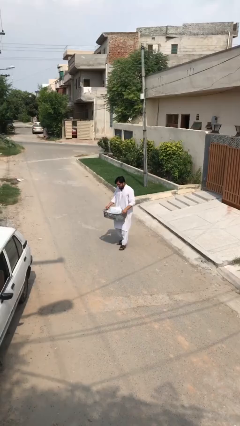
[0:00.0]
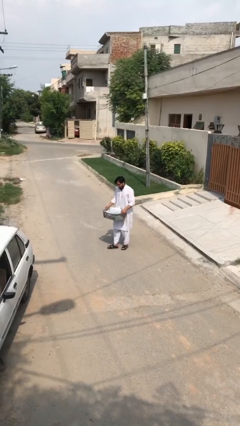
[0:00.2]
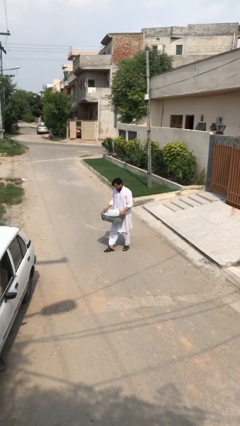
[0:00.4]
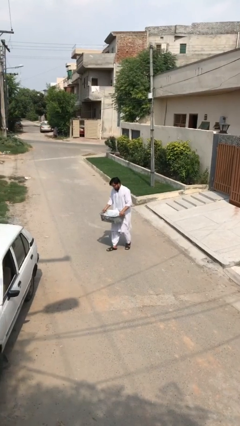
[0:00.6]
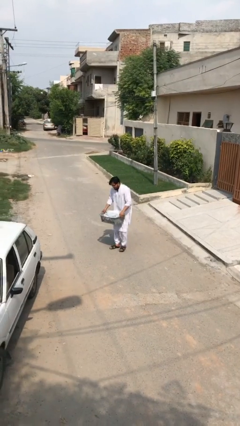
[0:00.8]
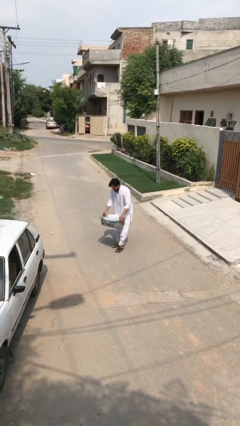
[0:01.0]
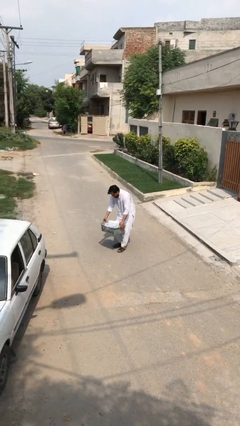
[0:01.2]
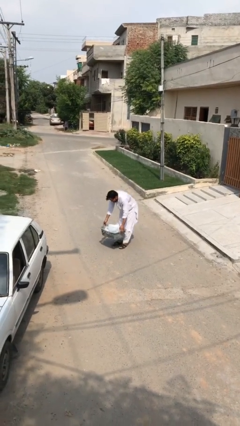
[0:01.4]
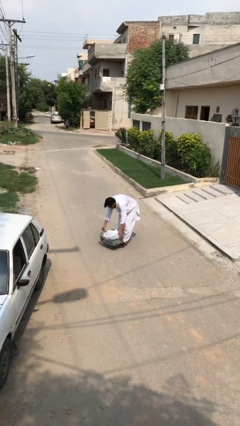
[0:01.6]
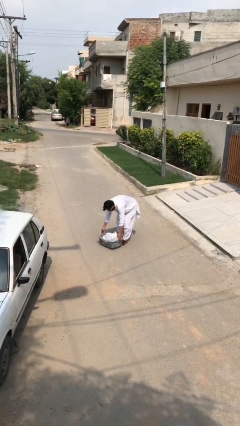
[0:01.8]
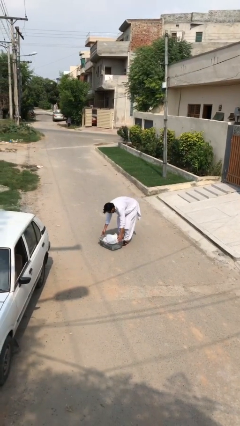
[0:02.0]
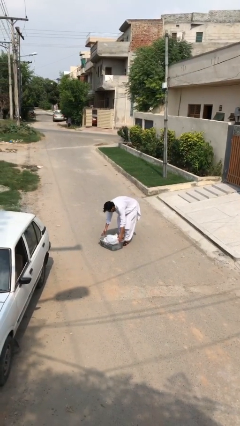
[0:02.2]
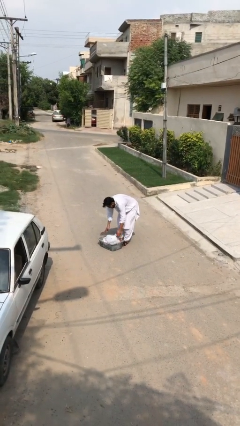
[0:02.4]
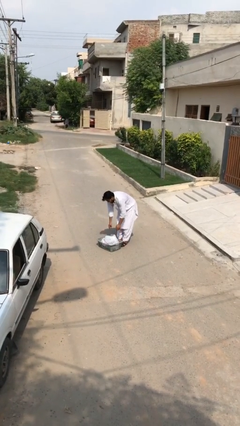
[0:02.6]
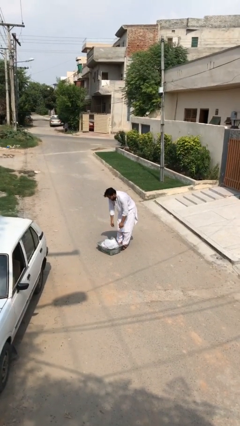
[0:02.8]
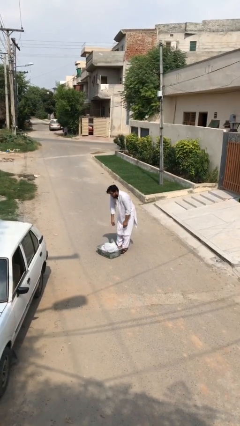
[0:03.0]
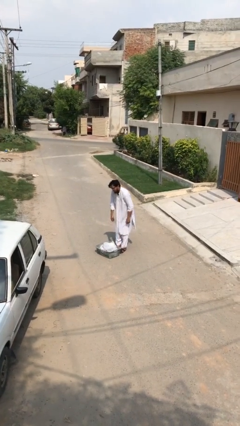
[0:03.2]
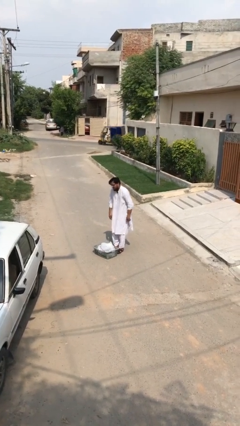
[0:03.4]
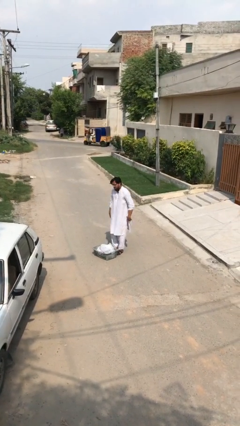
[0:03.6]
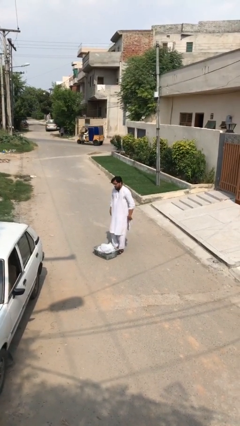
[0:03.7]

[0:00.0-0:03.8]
person puts down object on floor

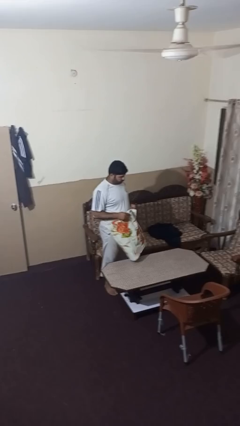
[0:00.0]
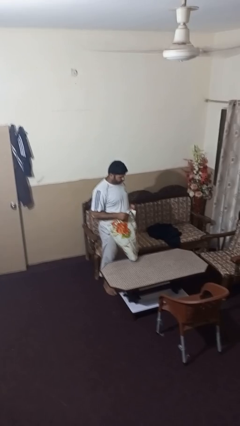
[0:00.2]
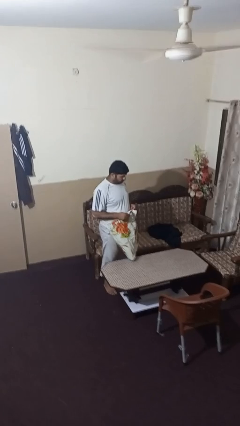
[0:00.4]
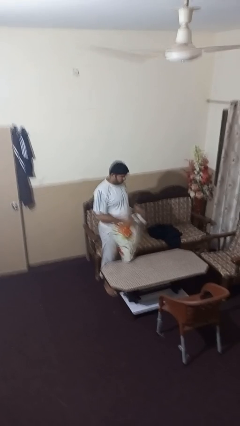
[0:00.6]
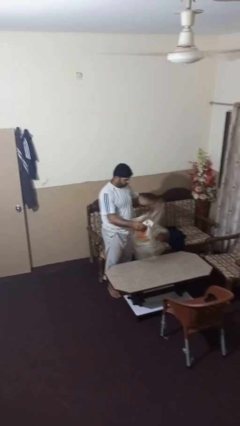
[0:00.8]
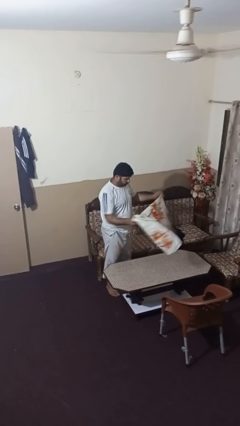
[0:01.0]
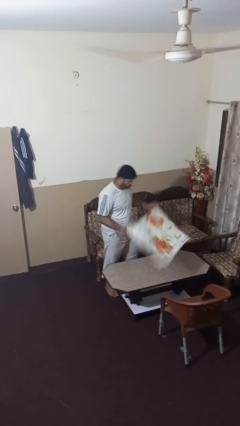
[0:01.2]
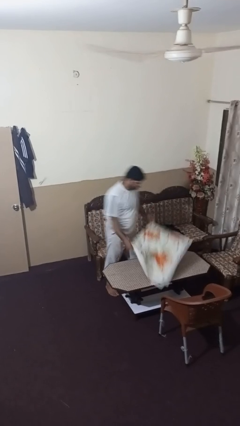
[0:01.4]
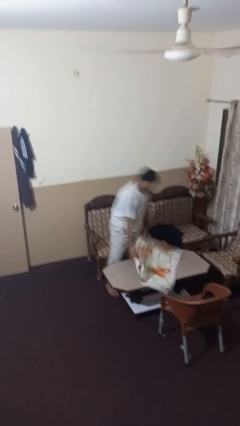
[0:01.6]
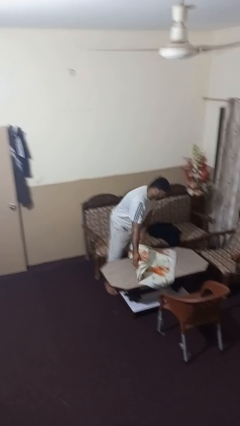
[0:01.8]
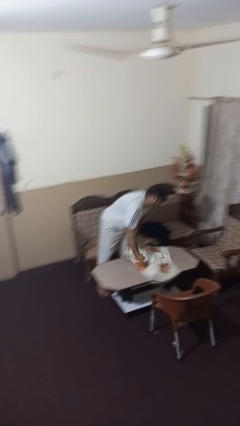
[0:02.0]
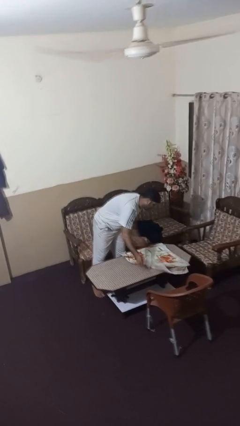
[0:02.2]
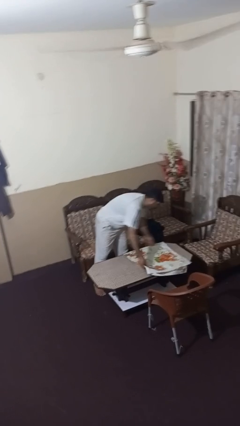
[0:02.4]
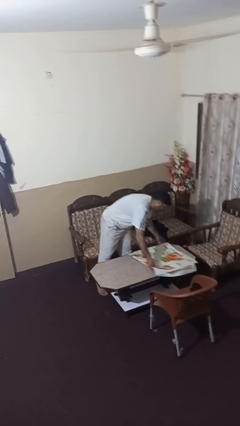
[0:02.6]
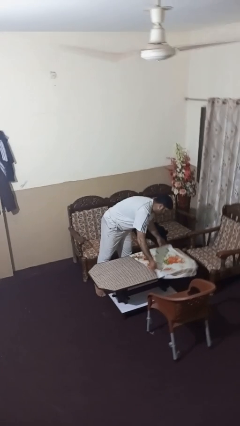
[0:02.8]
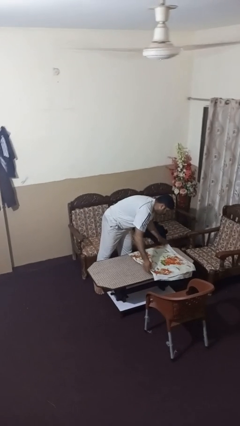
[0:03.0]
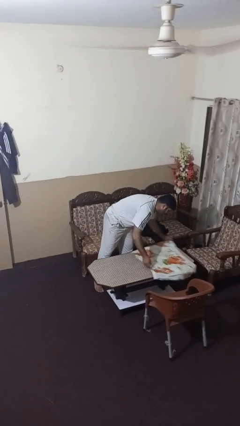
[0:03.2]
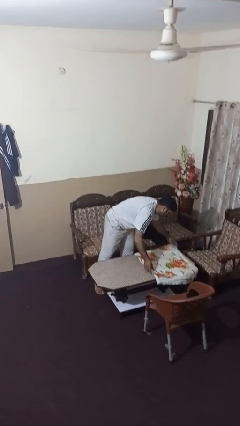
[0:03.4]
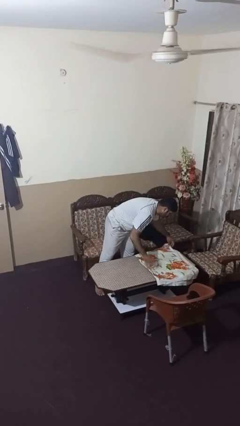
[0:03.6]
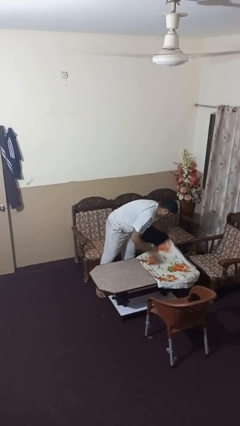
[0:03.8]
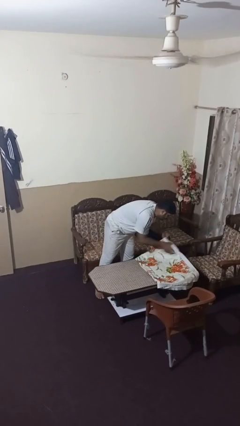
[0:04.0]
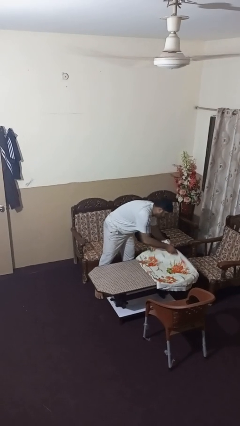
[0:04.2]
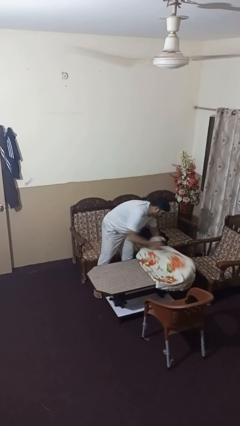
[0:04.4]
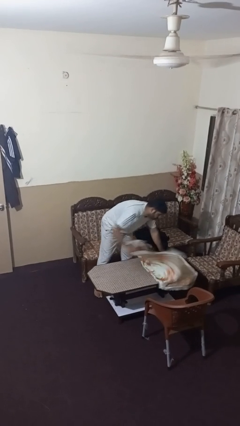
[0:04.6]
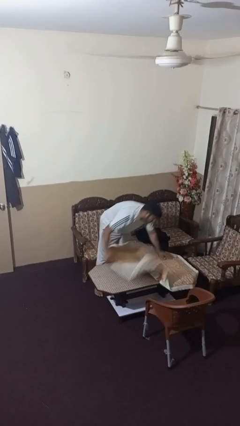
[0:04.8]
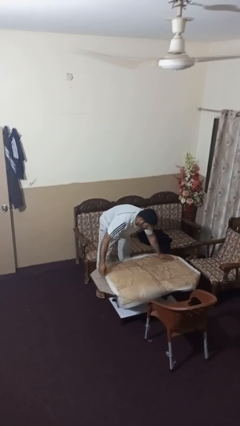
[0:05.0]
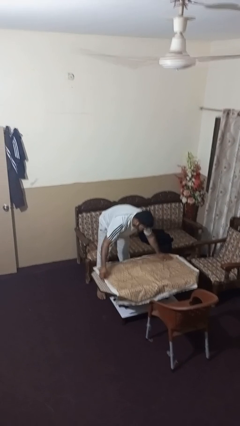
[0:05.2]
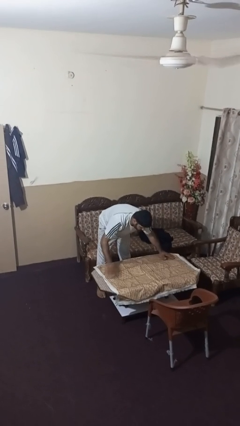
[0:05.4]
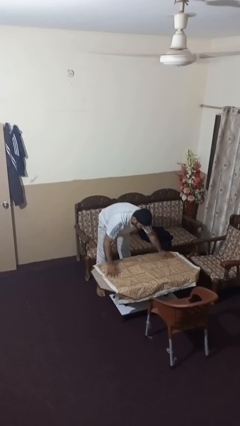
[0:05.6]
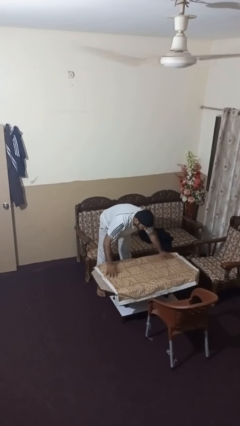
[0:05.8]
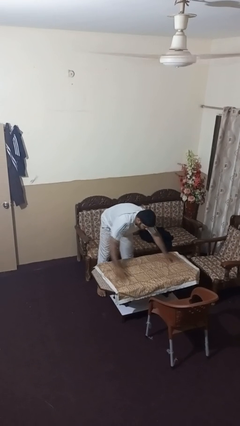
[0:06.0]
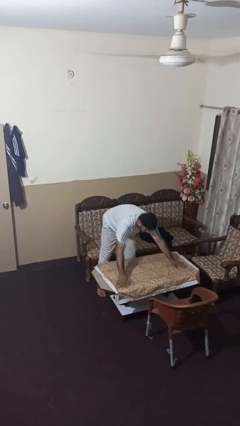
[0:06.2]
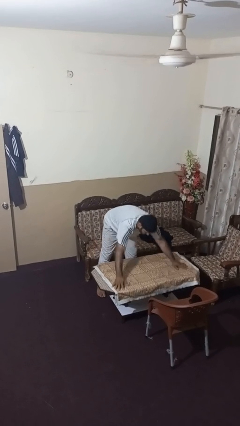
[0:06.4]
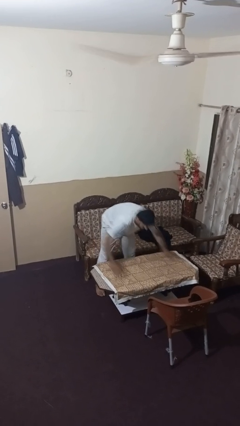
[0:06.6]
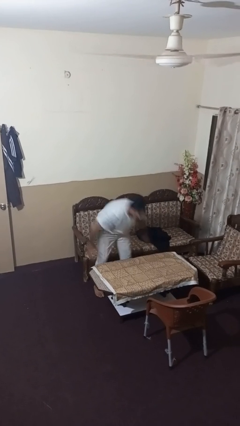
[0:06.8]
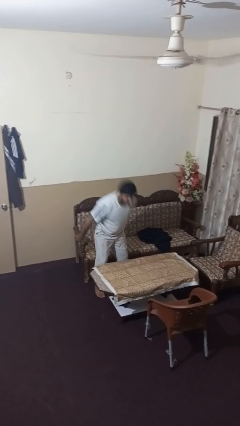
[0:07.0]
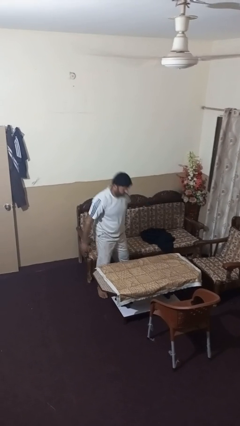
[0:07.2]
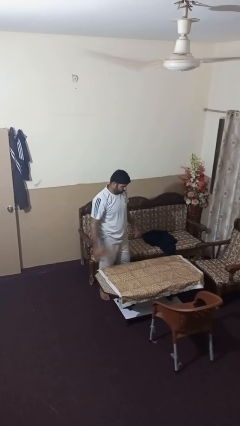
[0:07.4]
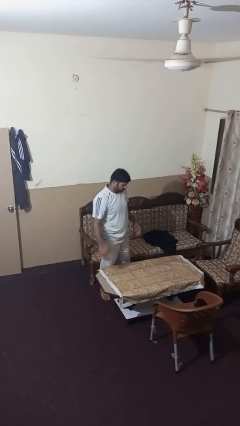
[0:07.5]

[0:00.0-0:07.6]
person spreads tablecloth

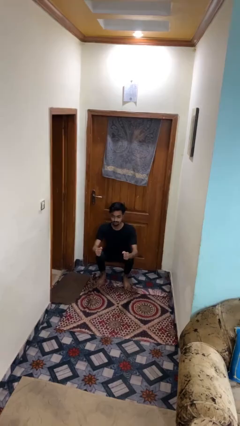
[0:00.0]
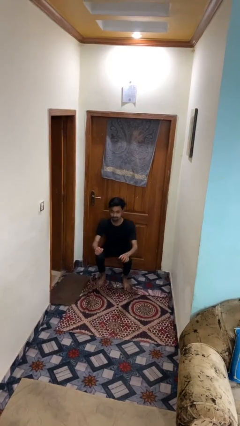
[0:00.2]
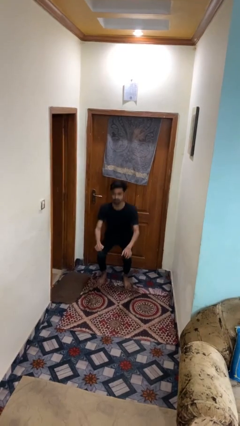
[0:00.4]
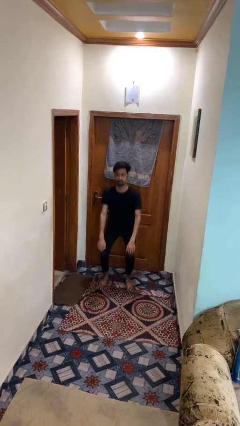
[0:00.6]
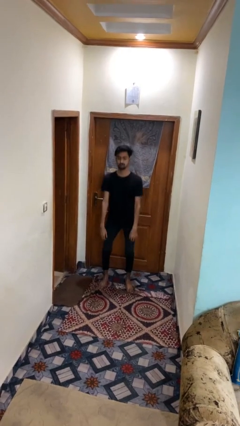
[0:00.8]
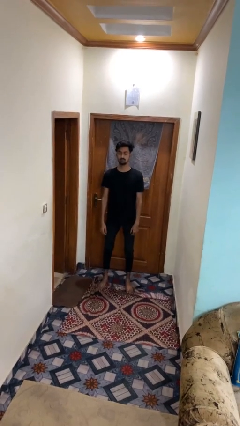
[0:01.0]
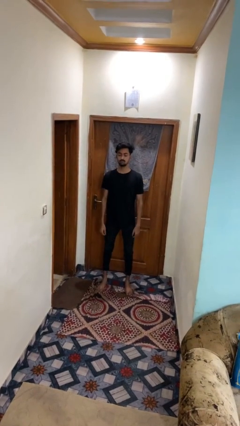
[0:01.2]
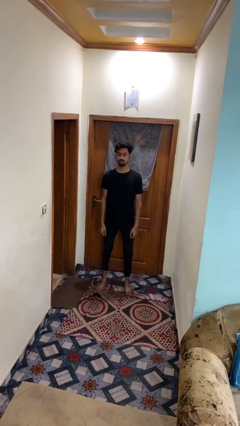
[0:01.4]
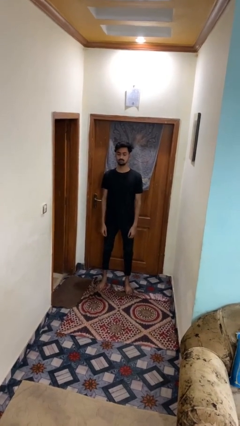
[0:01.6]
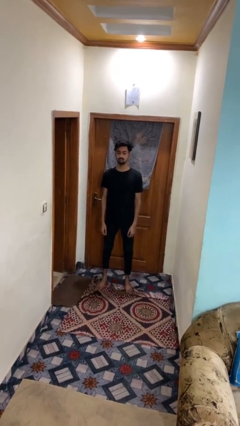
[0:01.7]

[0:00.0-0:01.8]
person stands up

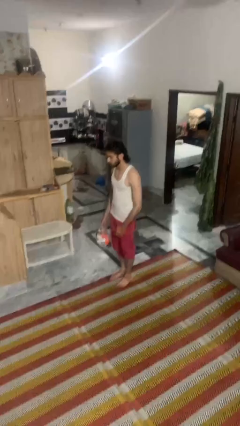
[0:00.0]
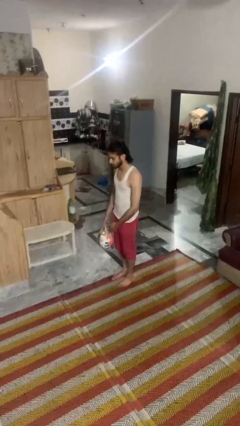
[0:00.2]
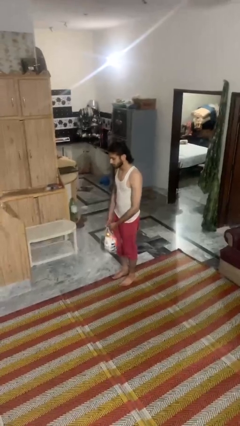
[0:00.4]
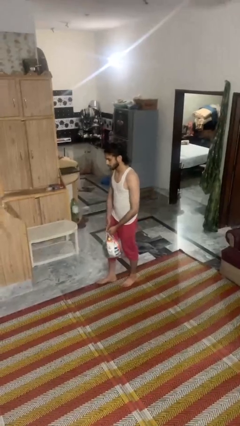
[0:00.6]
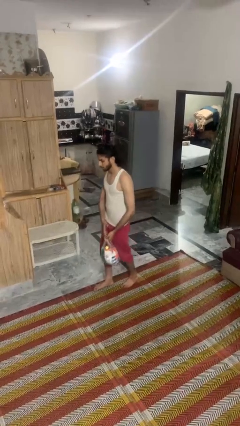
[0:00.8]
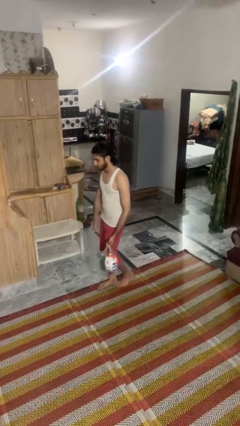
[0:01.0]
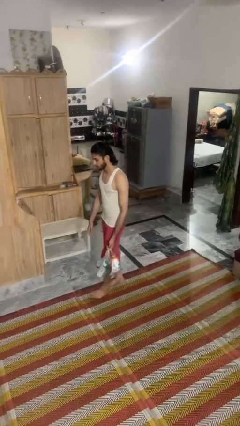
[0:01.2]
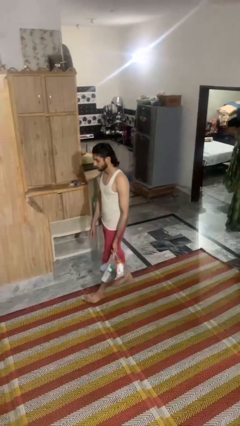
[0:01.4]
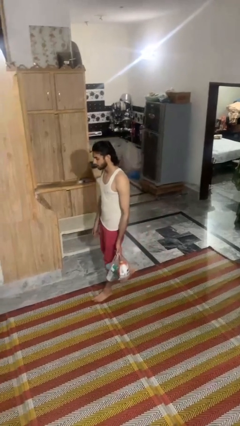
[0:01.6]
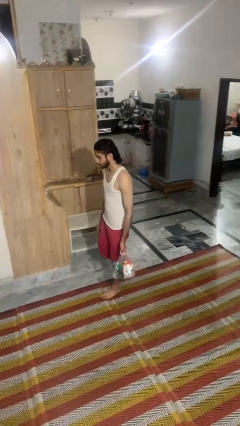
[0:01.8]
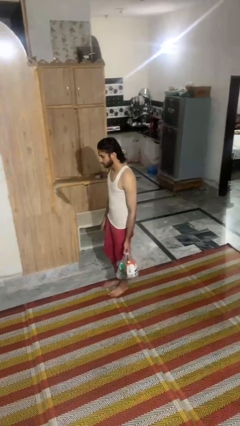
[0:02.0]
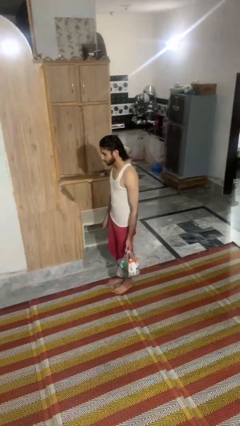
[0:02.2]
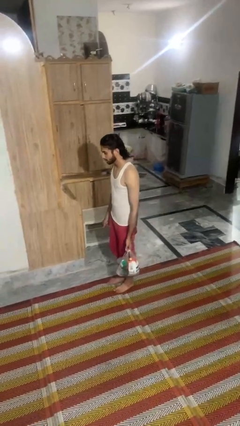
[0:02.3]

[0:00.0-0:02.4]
person carries groceries

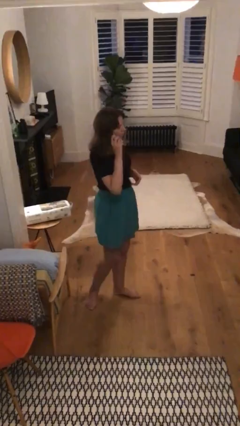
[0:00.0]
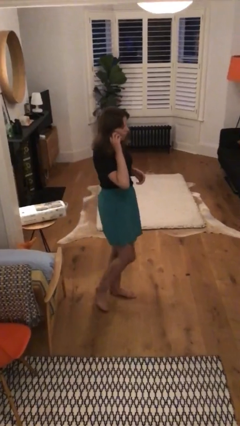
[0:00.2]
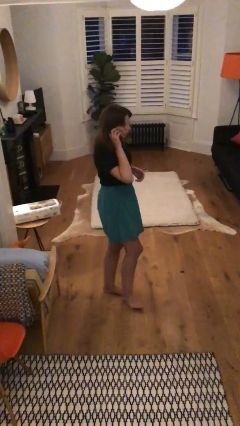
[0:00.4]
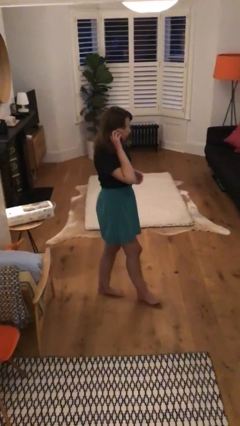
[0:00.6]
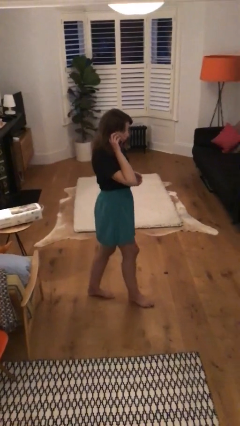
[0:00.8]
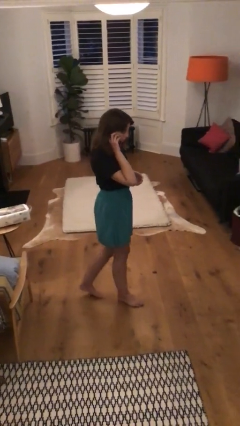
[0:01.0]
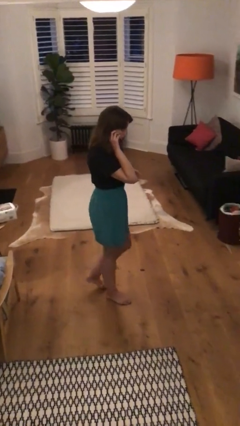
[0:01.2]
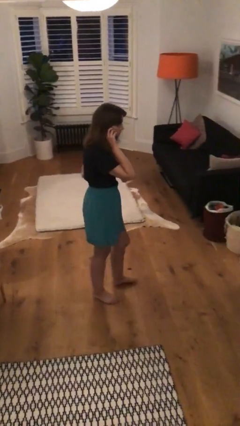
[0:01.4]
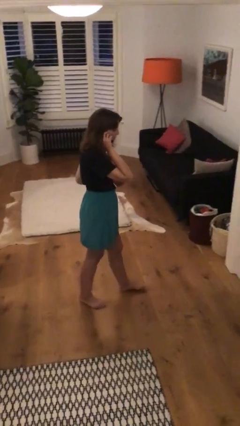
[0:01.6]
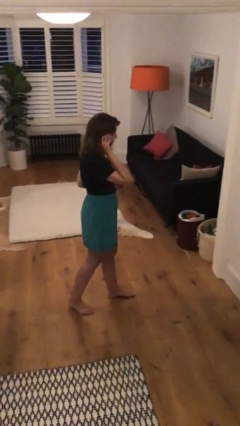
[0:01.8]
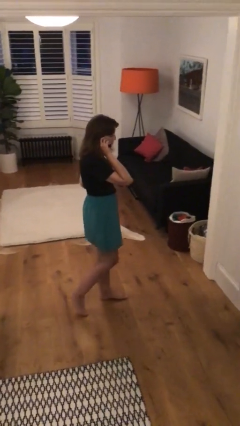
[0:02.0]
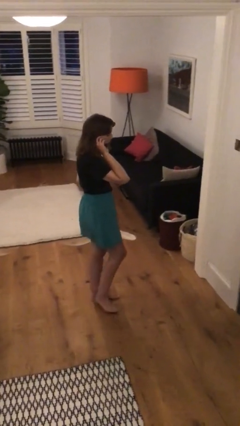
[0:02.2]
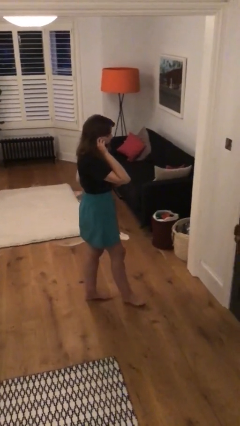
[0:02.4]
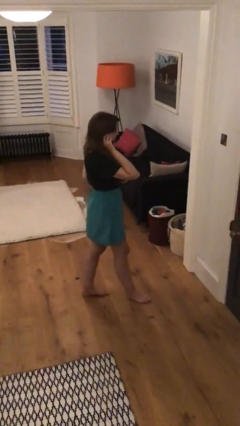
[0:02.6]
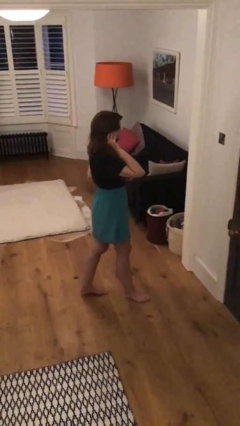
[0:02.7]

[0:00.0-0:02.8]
person talks on phone
